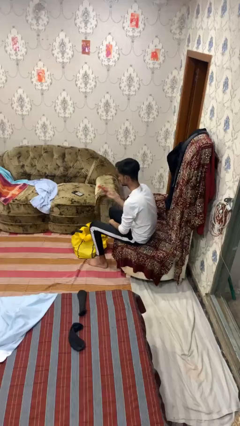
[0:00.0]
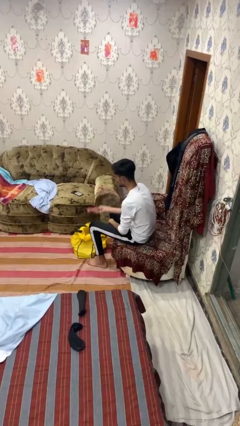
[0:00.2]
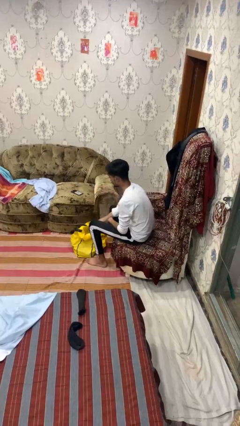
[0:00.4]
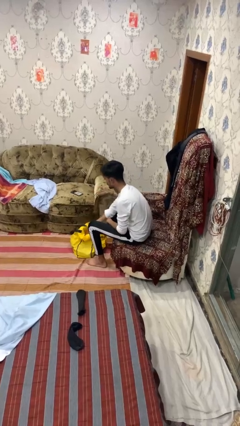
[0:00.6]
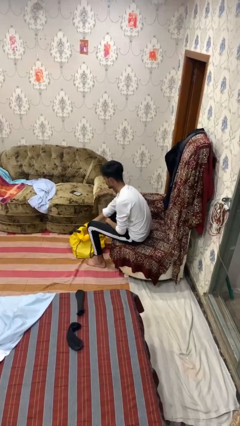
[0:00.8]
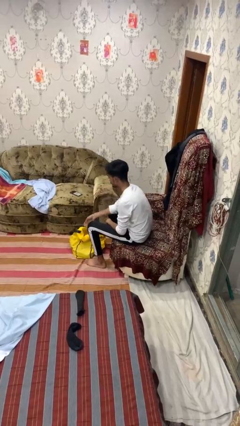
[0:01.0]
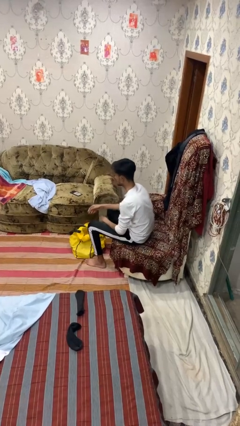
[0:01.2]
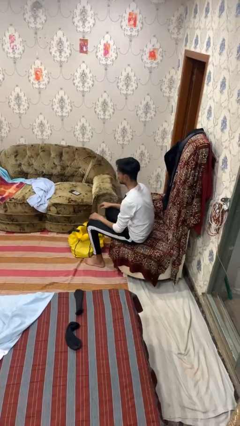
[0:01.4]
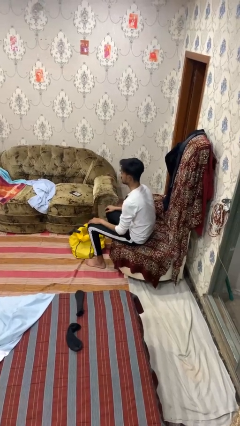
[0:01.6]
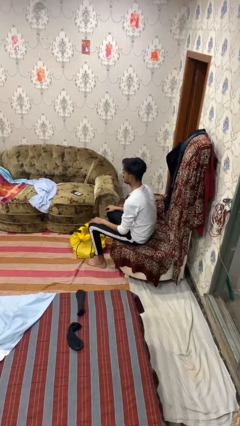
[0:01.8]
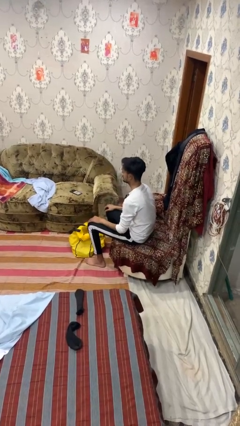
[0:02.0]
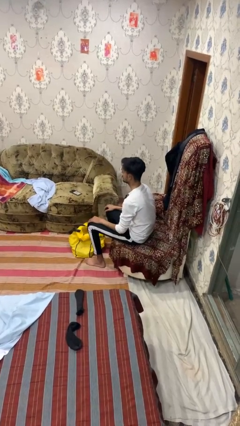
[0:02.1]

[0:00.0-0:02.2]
person puts object into bag

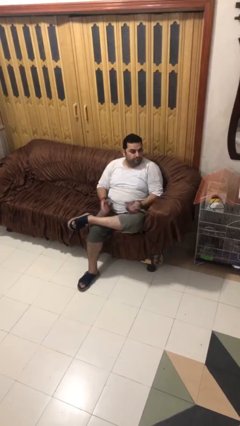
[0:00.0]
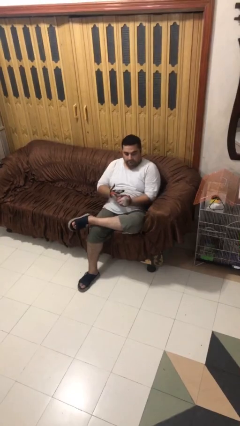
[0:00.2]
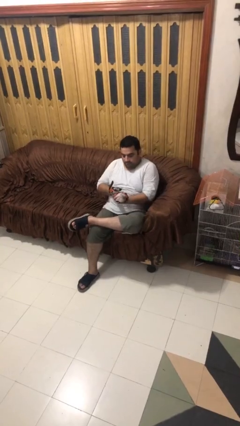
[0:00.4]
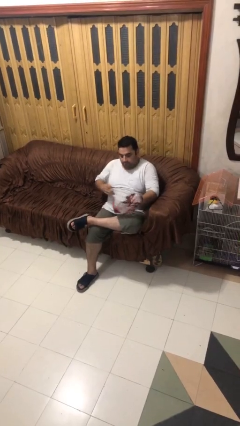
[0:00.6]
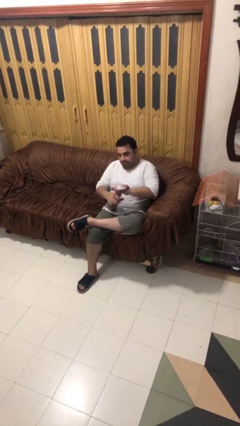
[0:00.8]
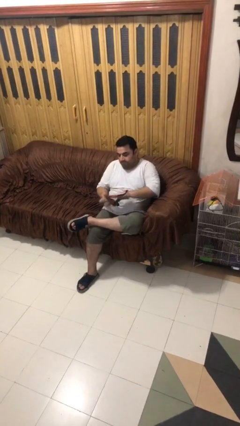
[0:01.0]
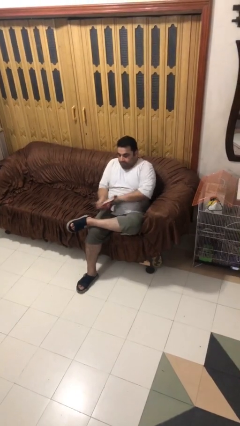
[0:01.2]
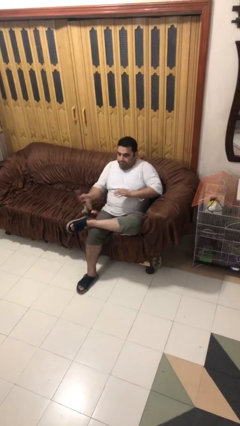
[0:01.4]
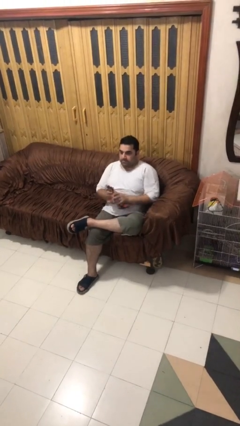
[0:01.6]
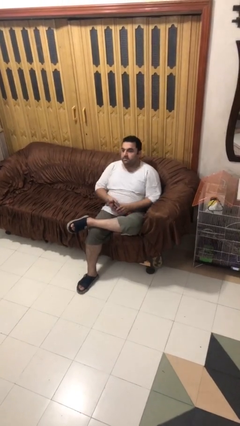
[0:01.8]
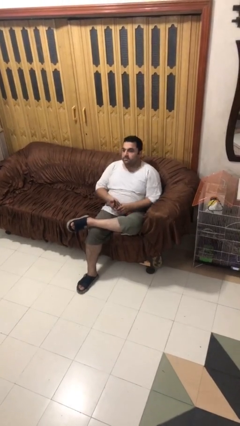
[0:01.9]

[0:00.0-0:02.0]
person takes off gloves

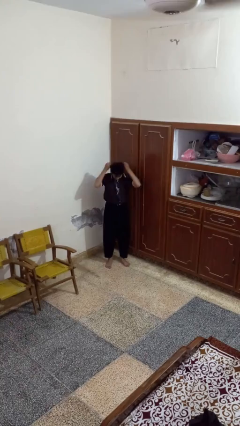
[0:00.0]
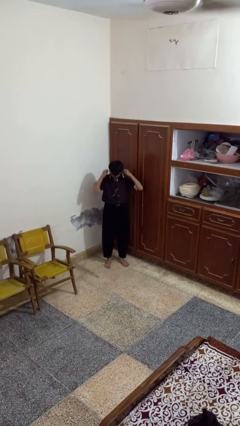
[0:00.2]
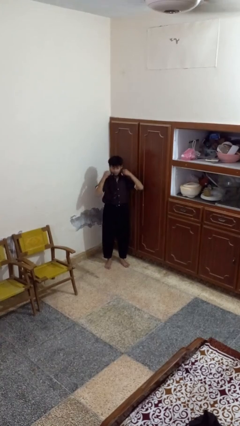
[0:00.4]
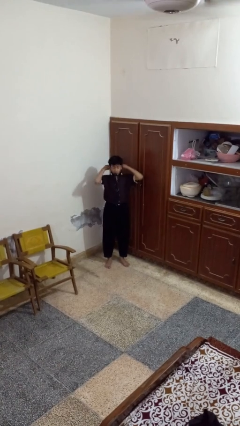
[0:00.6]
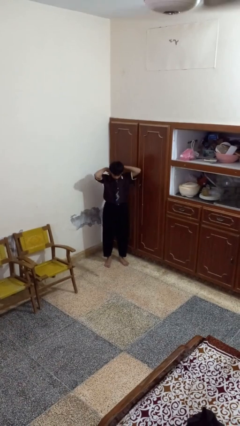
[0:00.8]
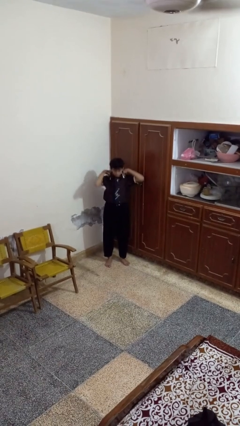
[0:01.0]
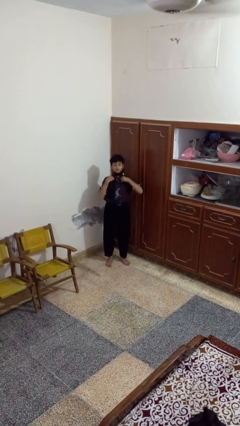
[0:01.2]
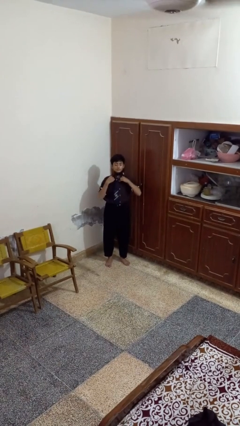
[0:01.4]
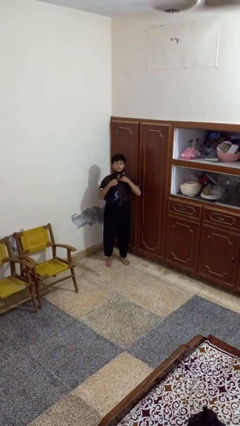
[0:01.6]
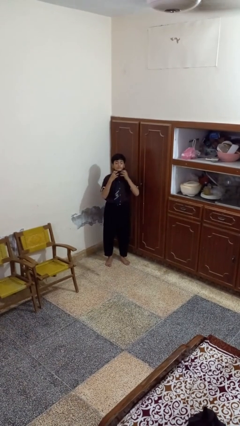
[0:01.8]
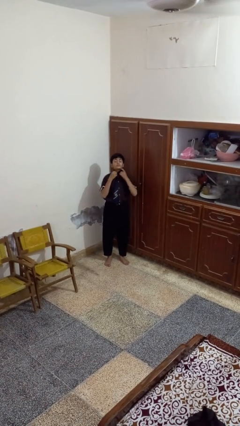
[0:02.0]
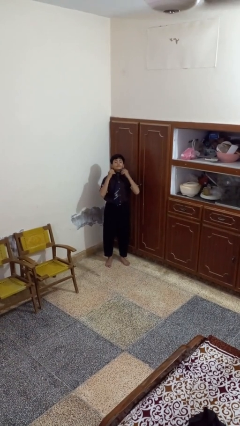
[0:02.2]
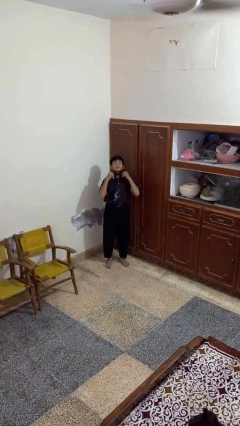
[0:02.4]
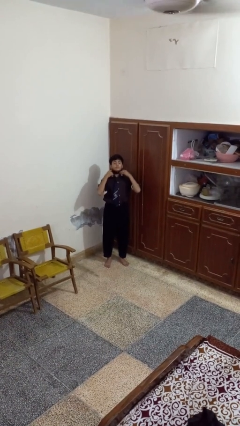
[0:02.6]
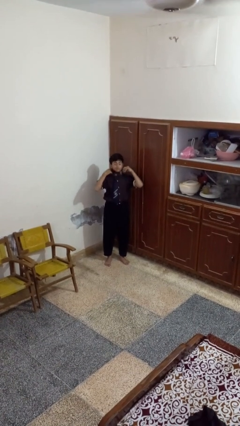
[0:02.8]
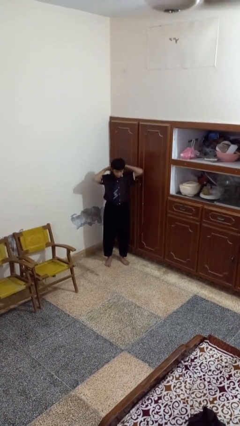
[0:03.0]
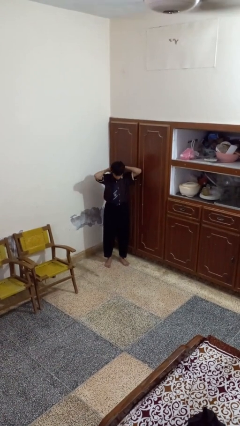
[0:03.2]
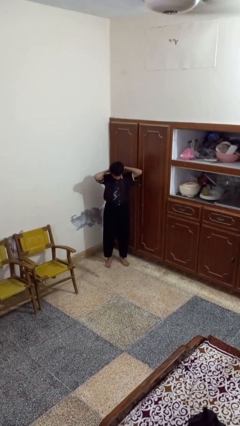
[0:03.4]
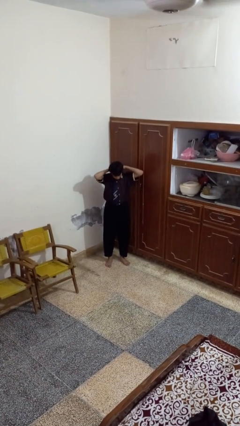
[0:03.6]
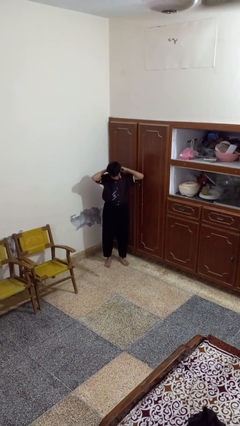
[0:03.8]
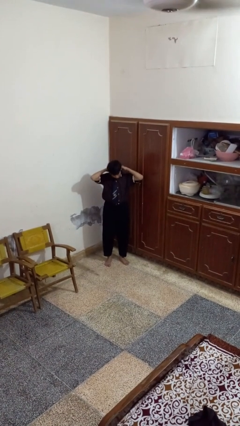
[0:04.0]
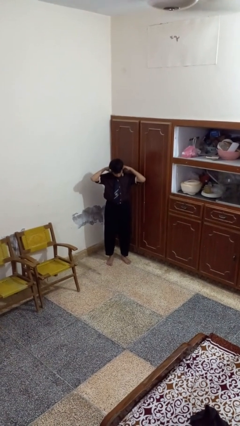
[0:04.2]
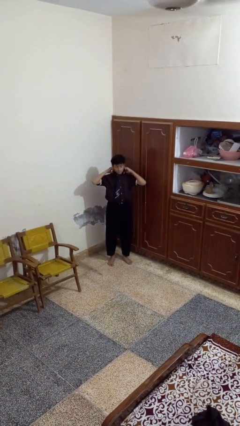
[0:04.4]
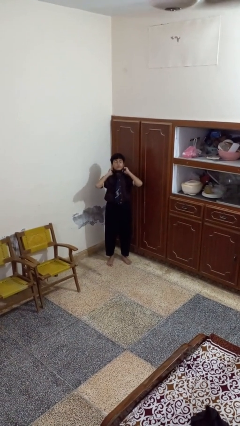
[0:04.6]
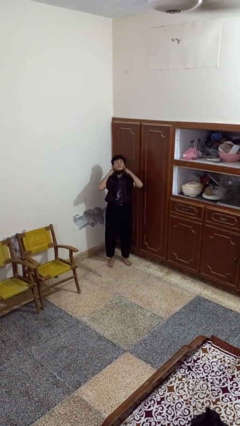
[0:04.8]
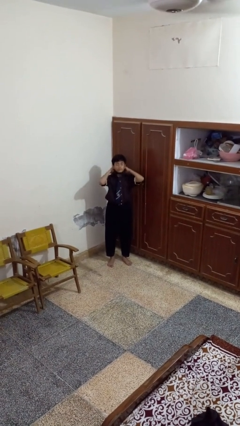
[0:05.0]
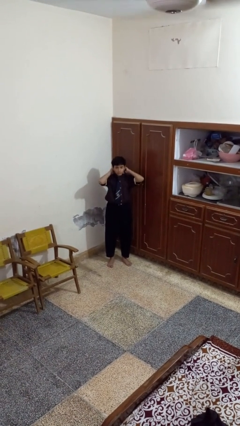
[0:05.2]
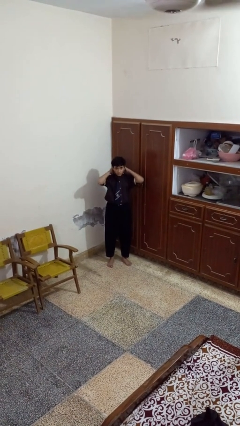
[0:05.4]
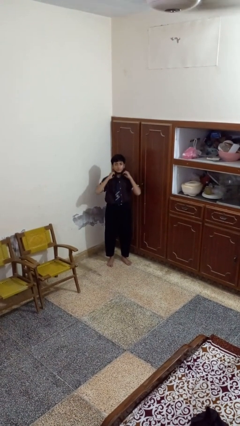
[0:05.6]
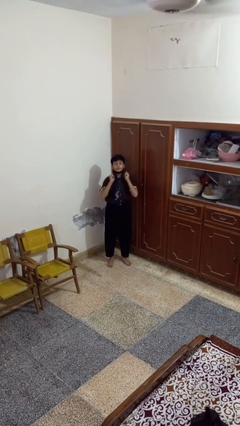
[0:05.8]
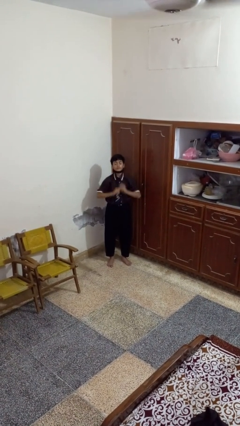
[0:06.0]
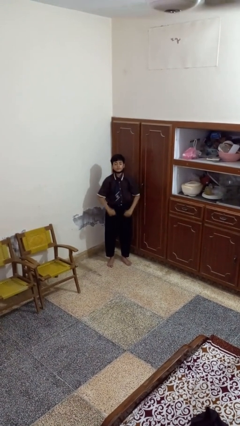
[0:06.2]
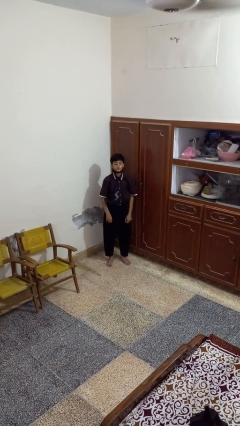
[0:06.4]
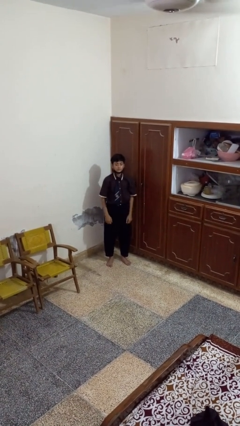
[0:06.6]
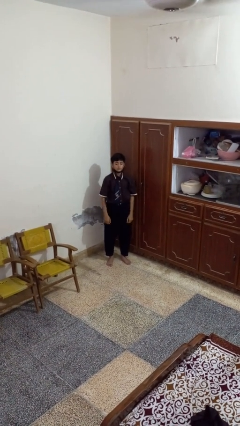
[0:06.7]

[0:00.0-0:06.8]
person puts on necktie

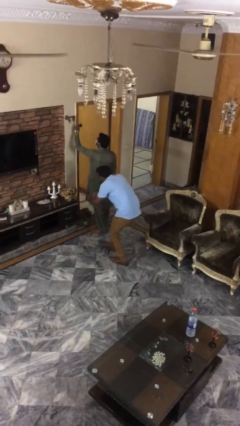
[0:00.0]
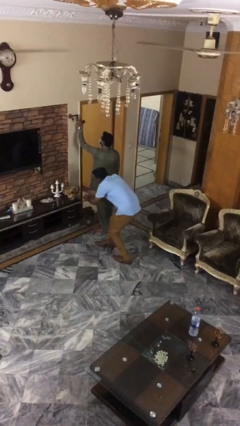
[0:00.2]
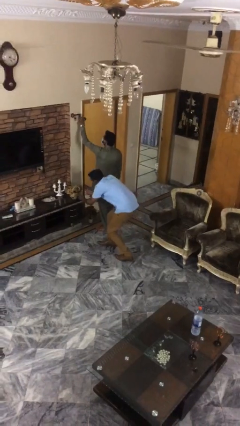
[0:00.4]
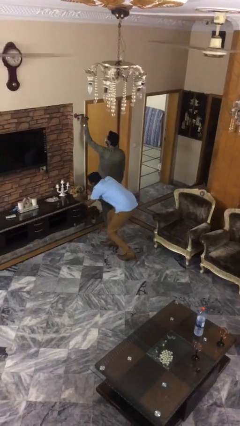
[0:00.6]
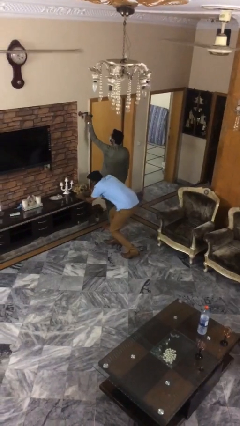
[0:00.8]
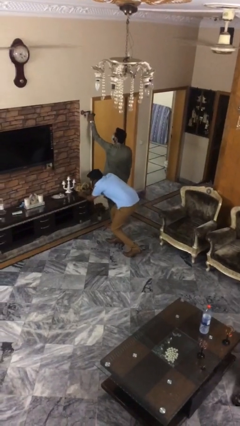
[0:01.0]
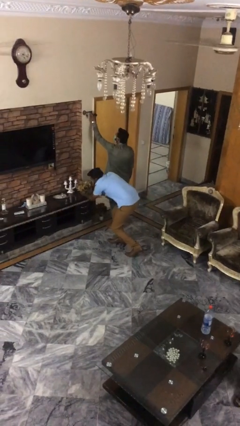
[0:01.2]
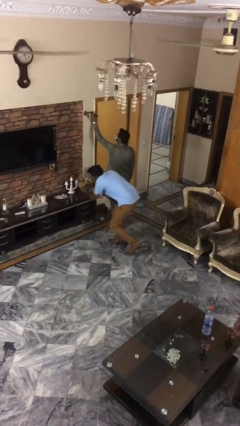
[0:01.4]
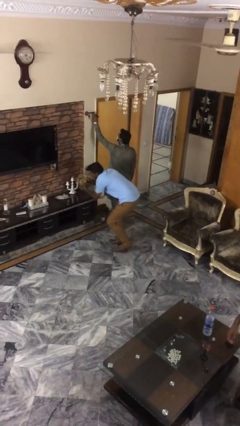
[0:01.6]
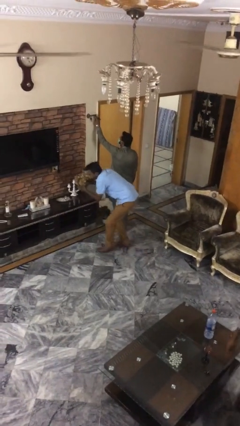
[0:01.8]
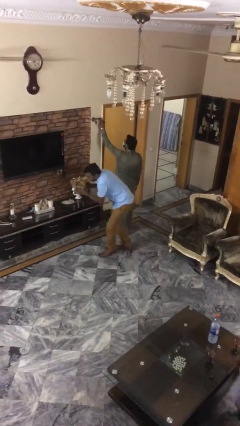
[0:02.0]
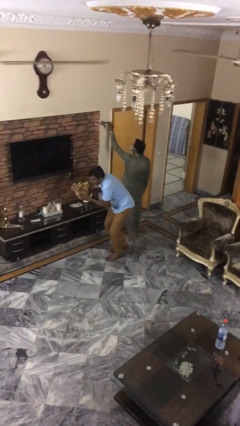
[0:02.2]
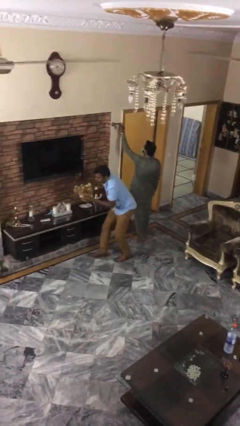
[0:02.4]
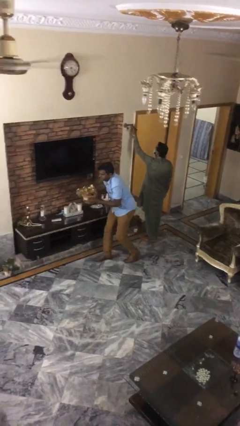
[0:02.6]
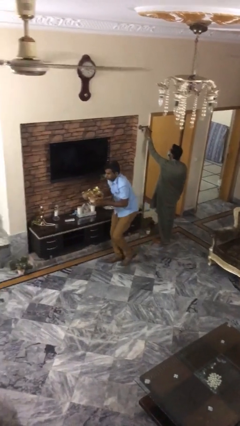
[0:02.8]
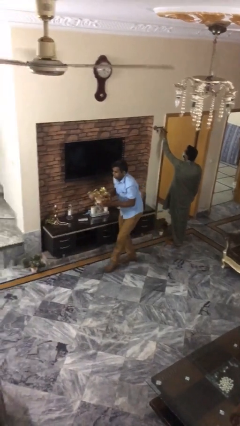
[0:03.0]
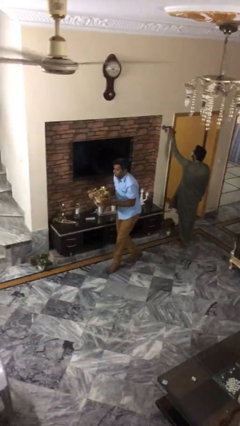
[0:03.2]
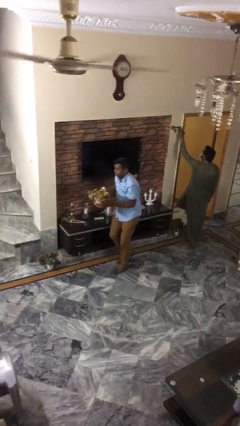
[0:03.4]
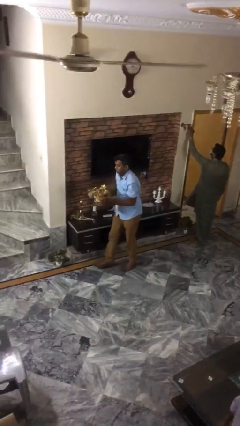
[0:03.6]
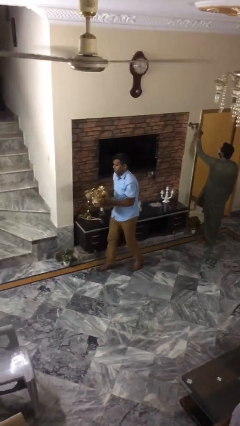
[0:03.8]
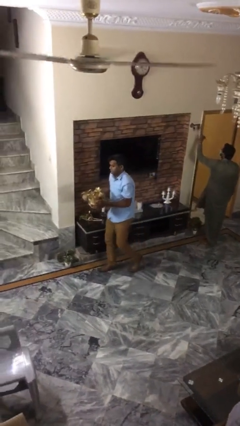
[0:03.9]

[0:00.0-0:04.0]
person steals object from person

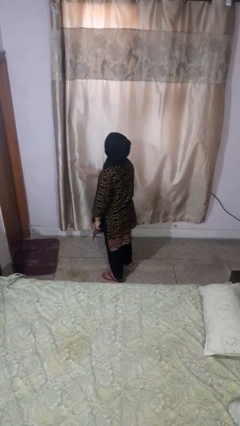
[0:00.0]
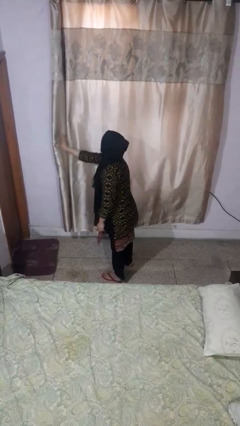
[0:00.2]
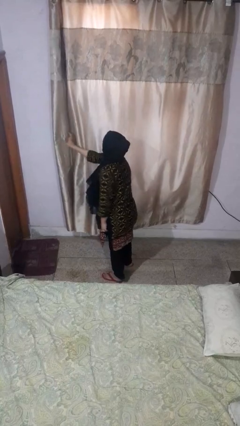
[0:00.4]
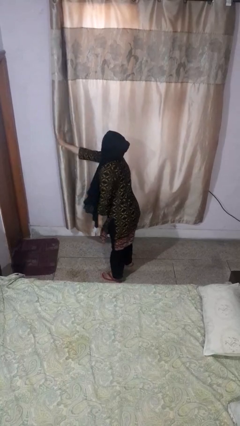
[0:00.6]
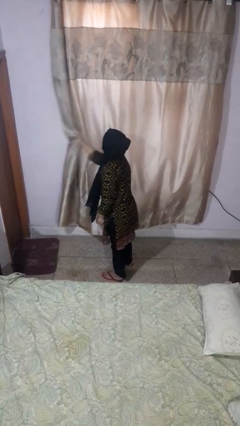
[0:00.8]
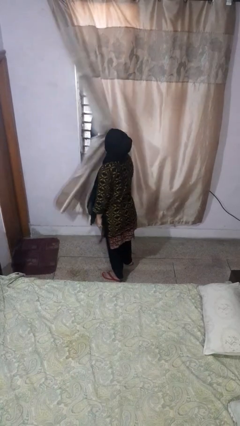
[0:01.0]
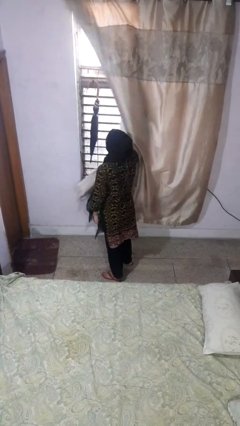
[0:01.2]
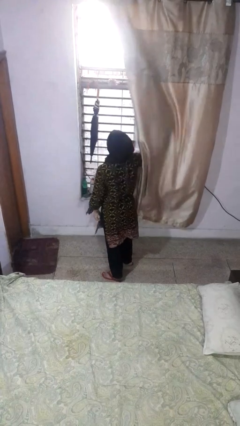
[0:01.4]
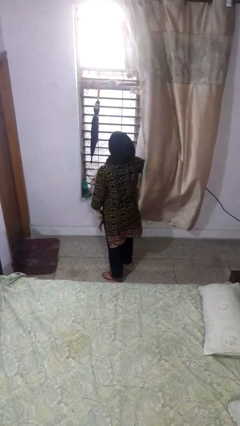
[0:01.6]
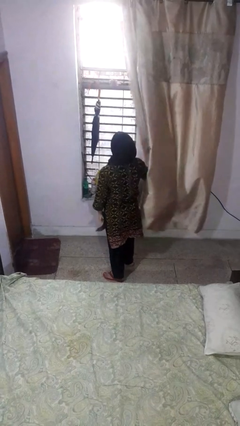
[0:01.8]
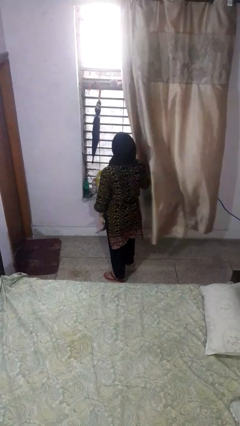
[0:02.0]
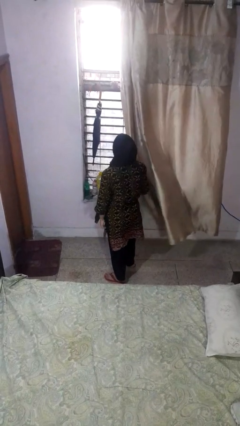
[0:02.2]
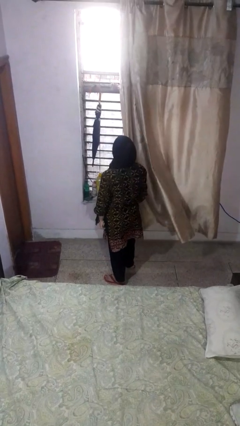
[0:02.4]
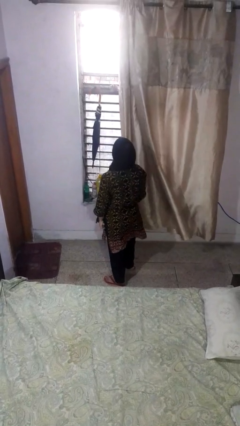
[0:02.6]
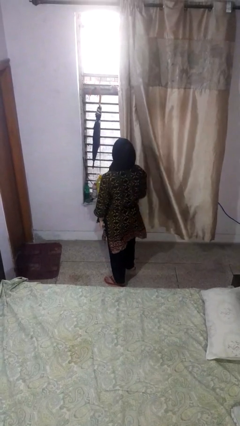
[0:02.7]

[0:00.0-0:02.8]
person opens curtains
